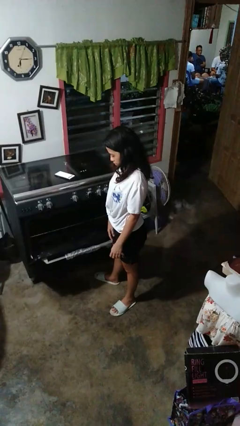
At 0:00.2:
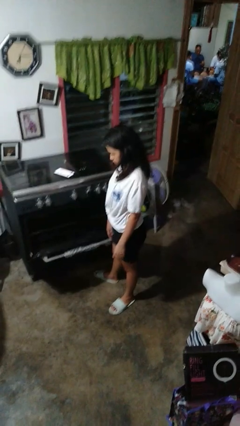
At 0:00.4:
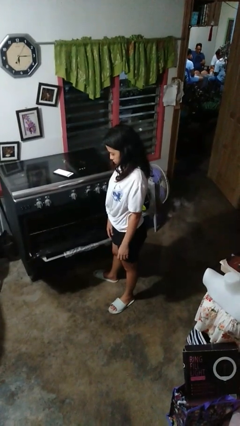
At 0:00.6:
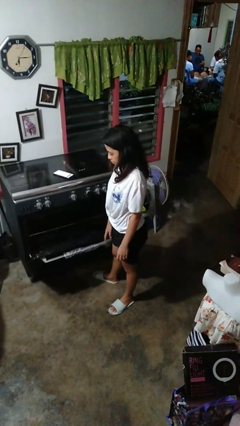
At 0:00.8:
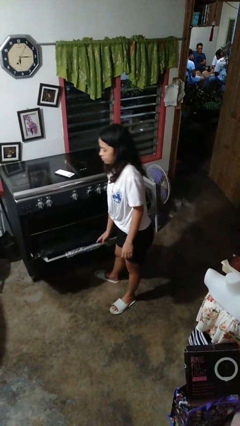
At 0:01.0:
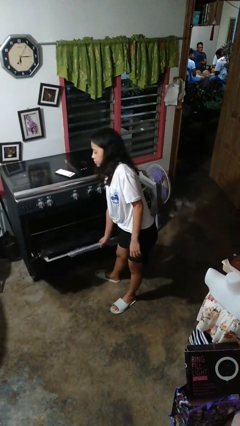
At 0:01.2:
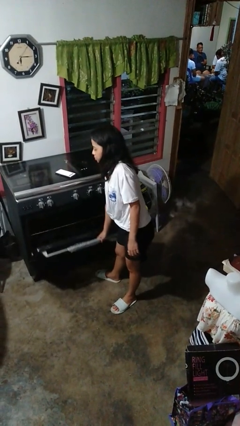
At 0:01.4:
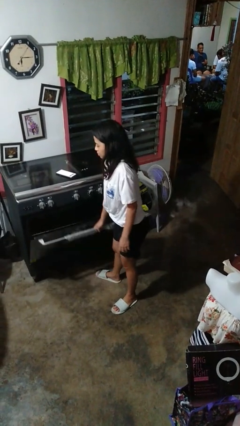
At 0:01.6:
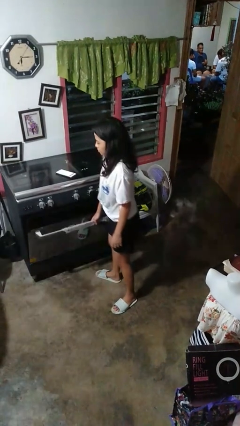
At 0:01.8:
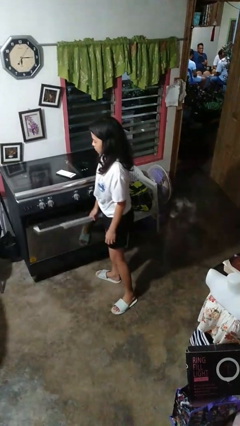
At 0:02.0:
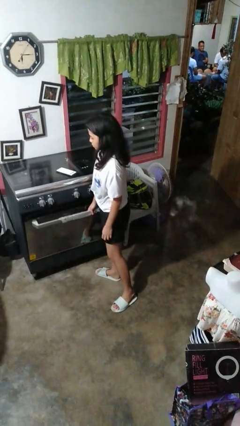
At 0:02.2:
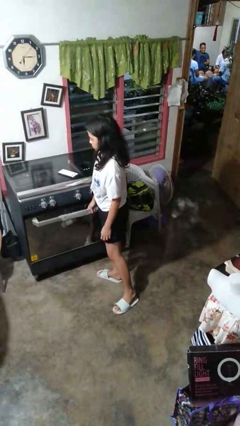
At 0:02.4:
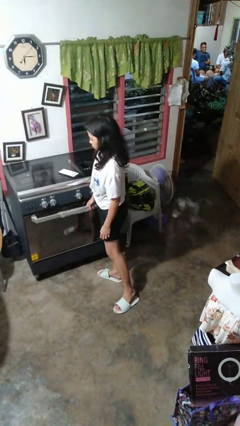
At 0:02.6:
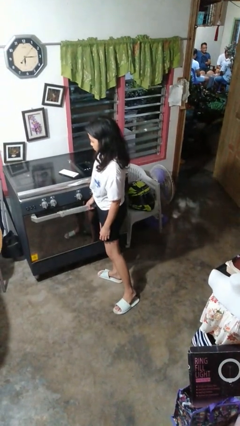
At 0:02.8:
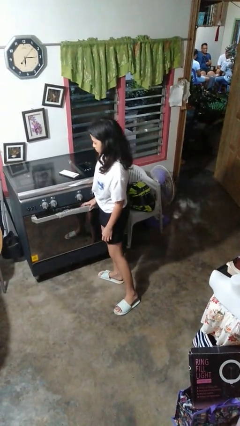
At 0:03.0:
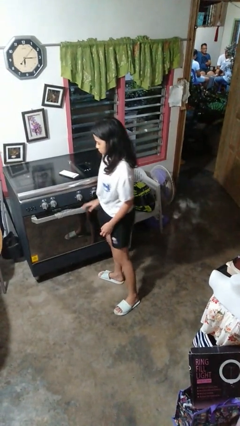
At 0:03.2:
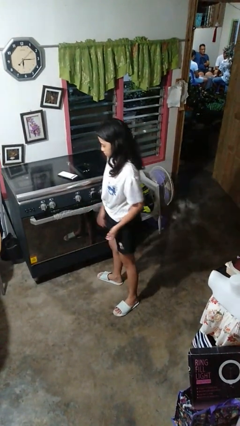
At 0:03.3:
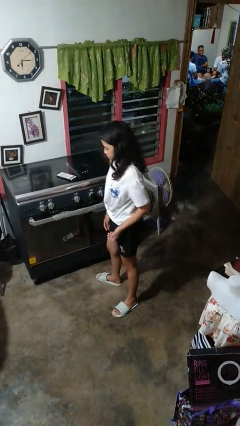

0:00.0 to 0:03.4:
person closes oven door

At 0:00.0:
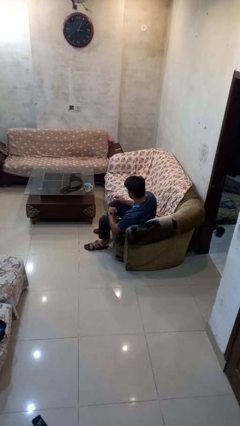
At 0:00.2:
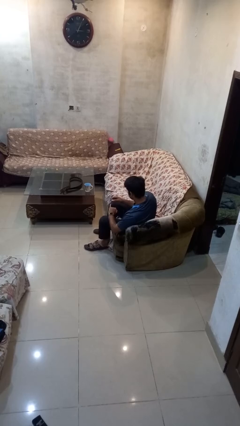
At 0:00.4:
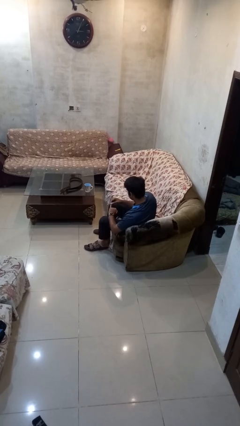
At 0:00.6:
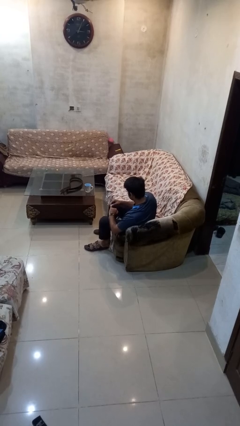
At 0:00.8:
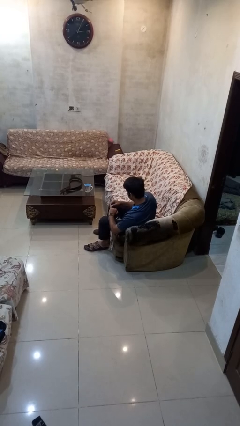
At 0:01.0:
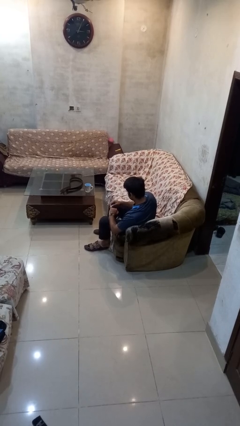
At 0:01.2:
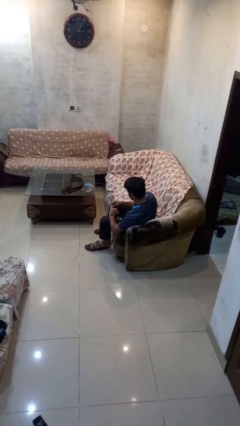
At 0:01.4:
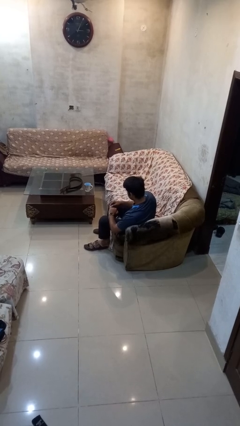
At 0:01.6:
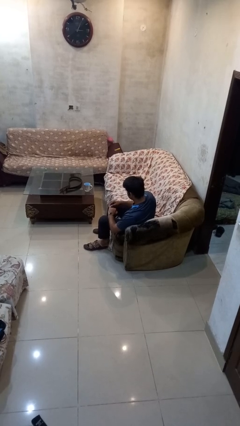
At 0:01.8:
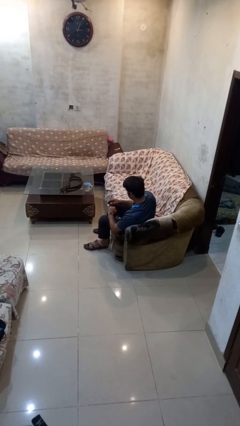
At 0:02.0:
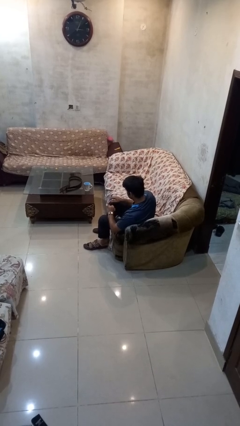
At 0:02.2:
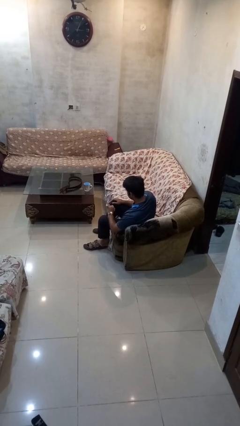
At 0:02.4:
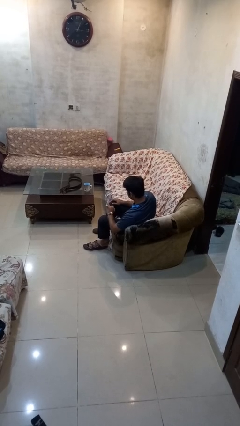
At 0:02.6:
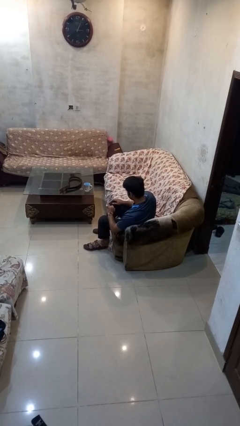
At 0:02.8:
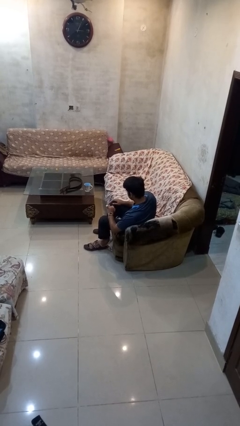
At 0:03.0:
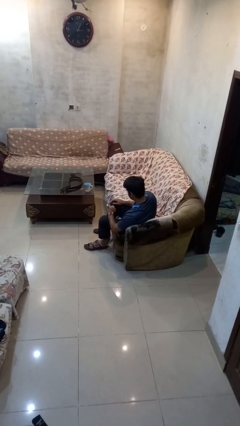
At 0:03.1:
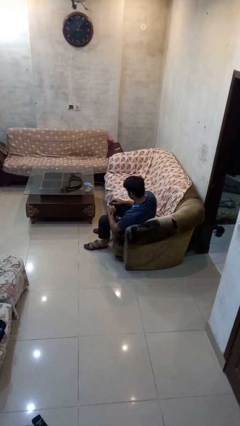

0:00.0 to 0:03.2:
person puts on ring

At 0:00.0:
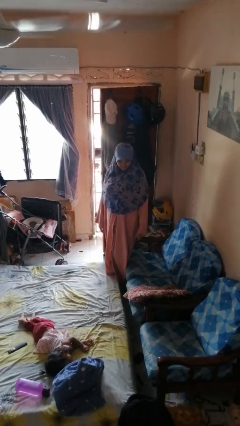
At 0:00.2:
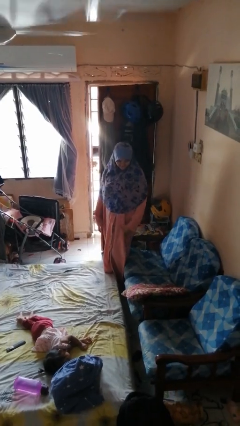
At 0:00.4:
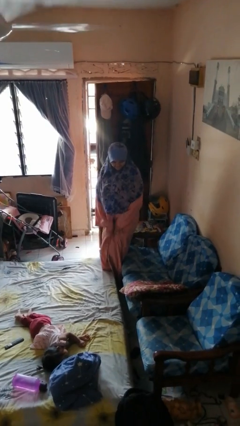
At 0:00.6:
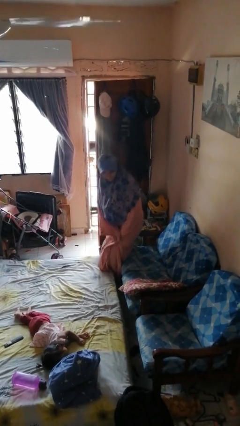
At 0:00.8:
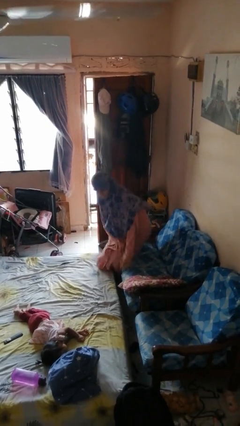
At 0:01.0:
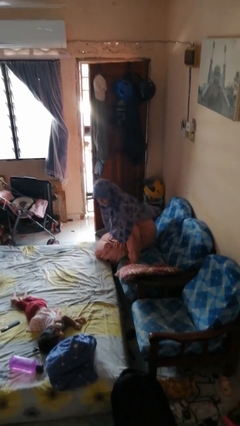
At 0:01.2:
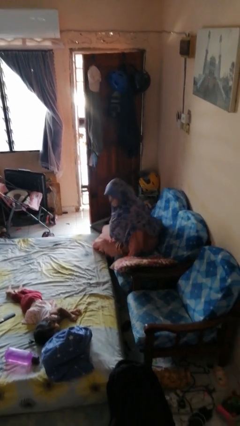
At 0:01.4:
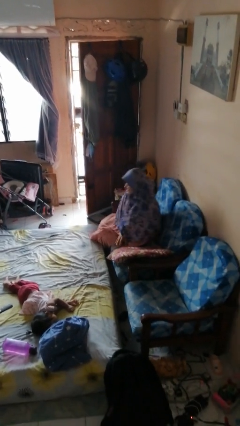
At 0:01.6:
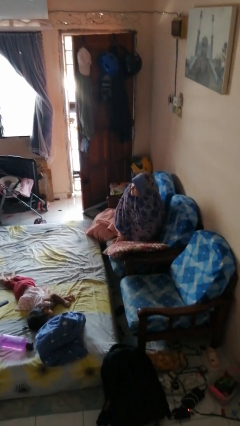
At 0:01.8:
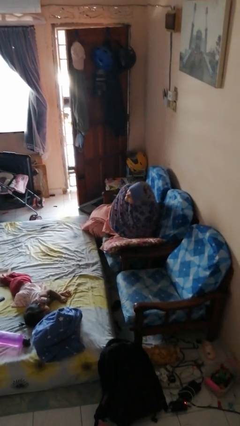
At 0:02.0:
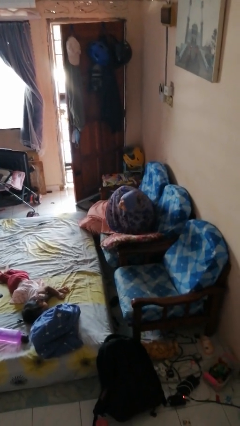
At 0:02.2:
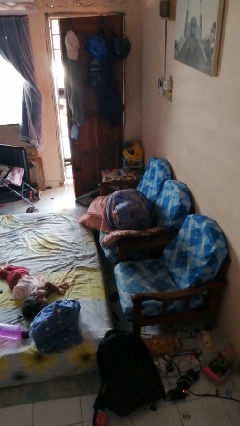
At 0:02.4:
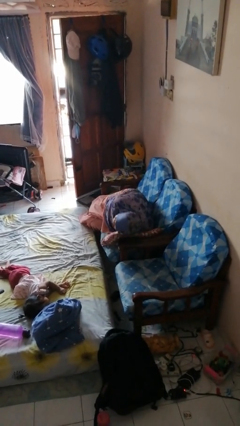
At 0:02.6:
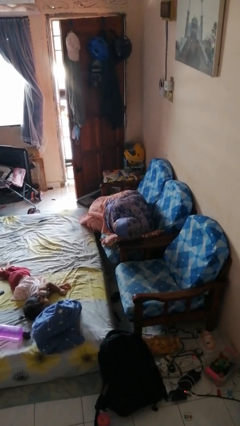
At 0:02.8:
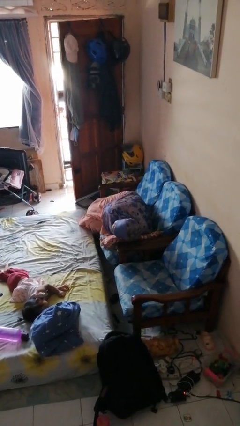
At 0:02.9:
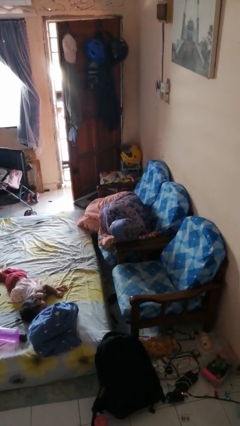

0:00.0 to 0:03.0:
person lies down on couch

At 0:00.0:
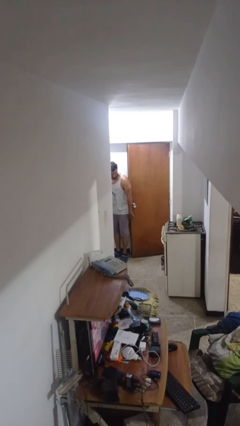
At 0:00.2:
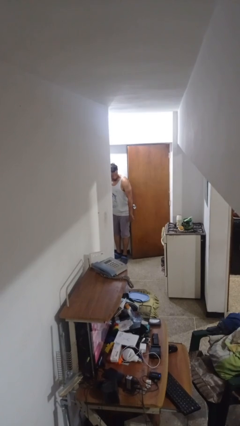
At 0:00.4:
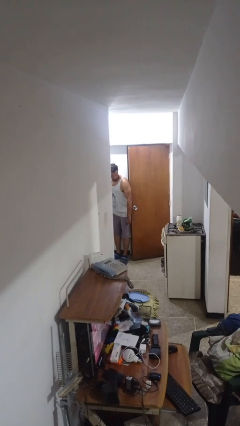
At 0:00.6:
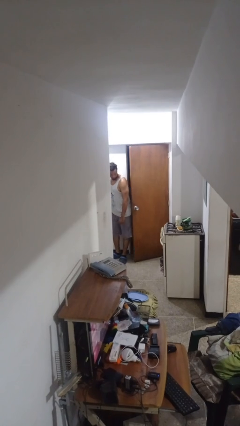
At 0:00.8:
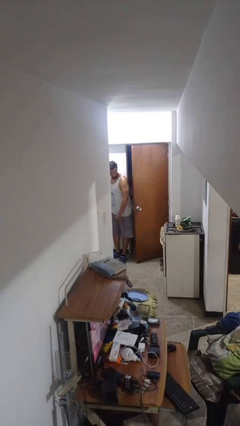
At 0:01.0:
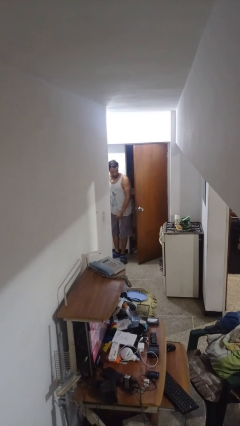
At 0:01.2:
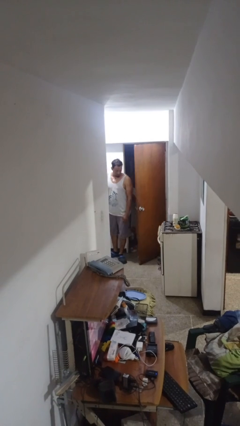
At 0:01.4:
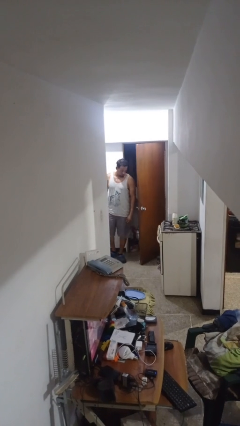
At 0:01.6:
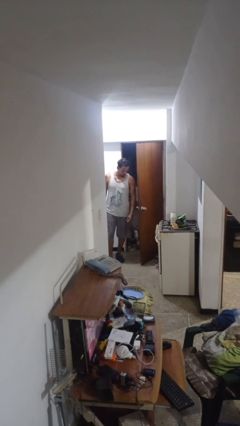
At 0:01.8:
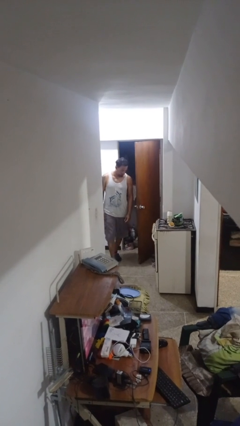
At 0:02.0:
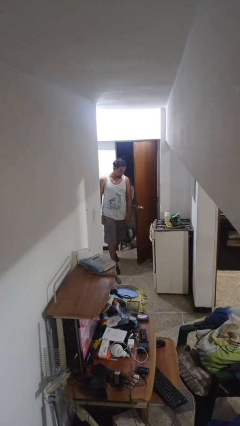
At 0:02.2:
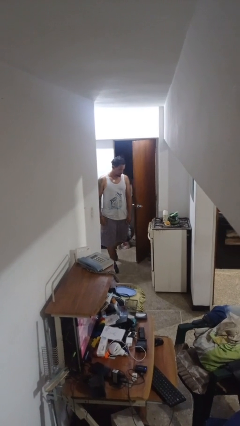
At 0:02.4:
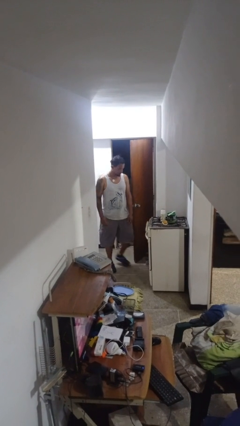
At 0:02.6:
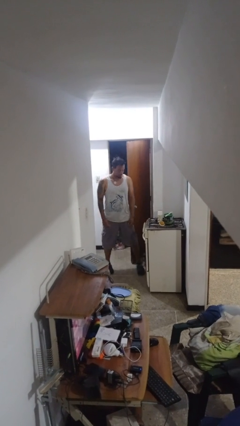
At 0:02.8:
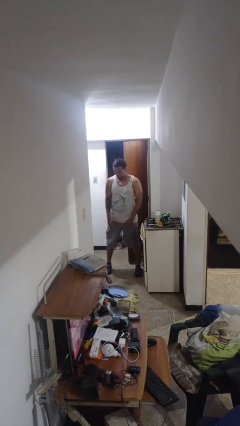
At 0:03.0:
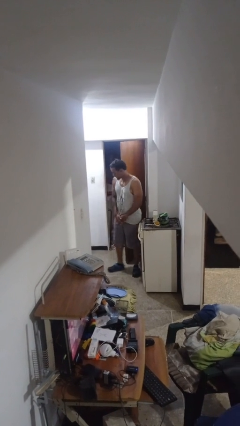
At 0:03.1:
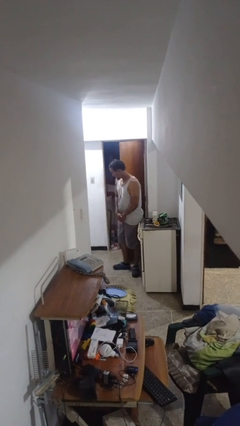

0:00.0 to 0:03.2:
person opens facility door

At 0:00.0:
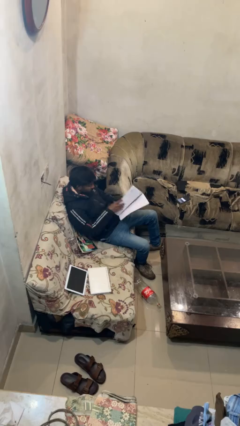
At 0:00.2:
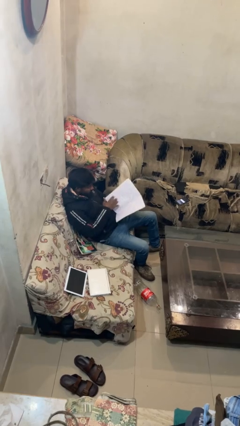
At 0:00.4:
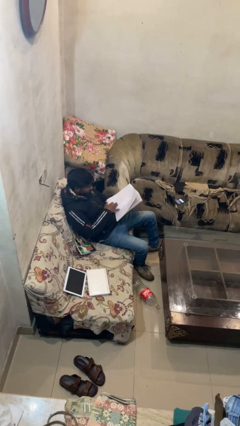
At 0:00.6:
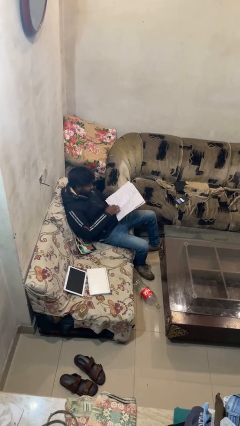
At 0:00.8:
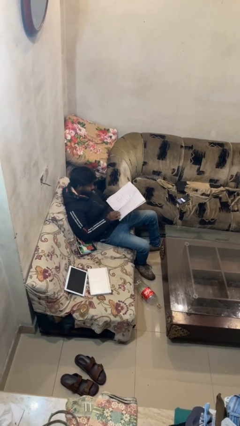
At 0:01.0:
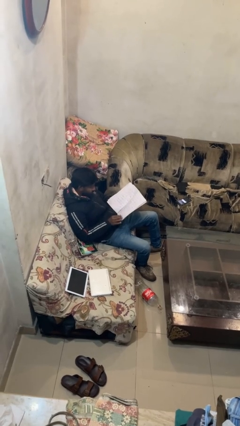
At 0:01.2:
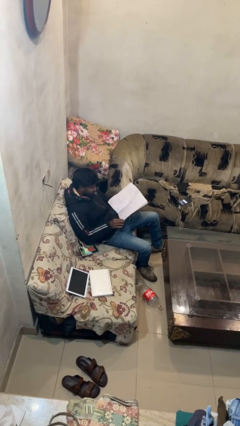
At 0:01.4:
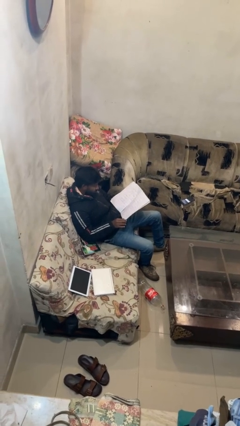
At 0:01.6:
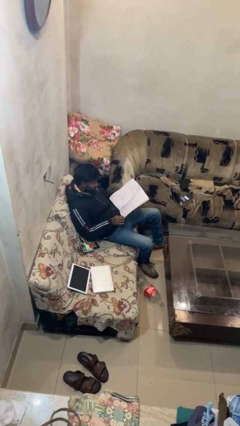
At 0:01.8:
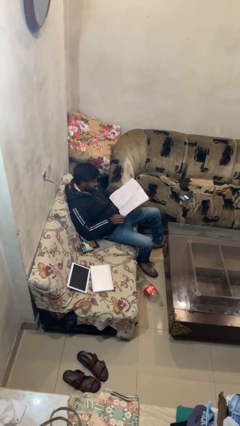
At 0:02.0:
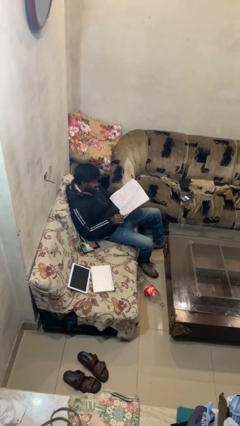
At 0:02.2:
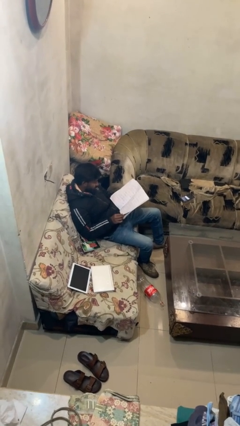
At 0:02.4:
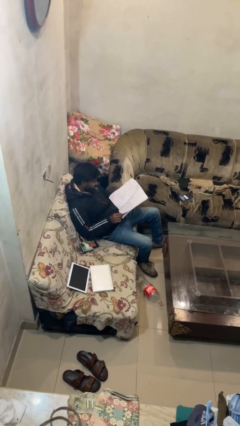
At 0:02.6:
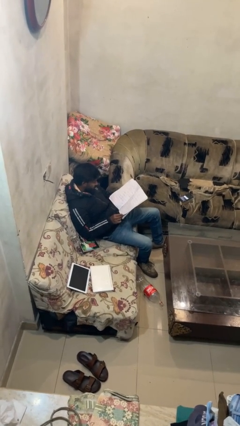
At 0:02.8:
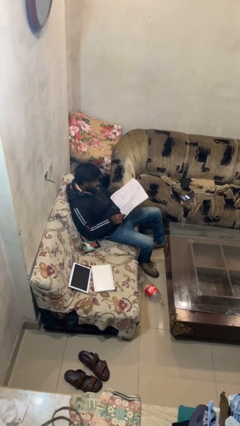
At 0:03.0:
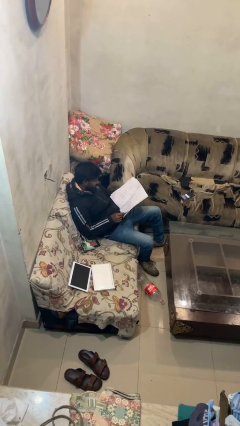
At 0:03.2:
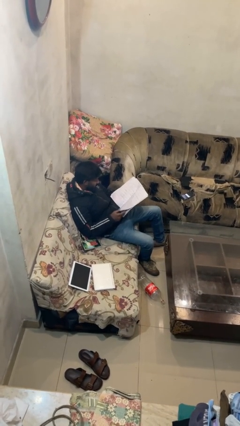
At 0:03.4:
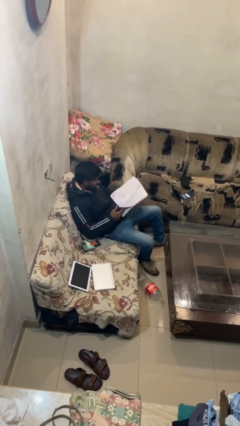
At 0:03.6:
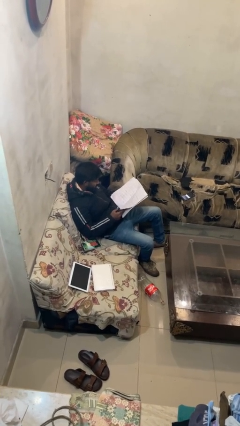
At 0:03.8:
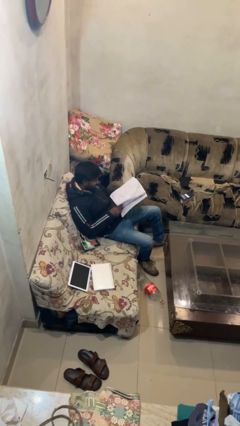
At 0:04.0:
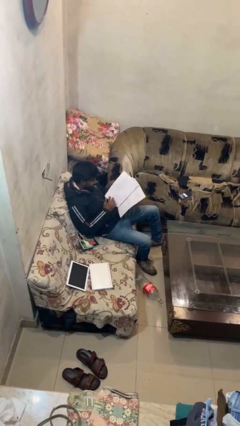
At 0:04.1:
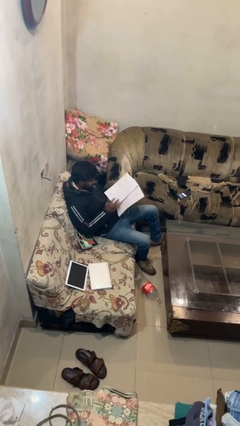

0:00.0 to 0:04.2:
person reads document

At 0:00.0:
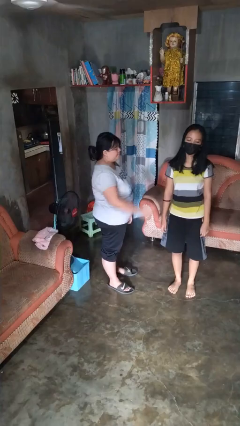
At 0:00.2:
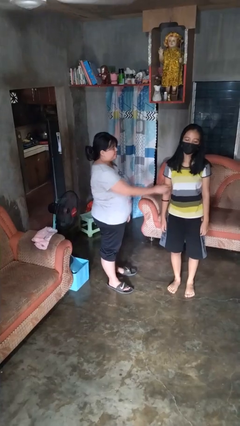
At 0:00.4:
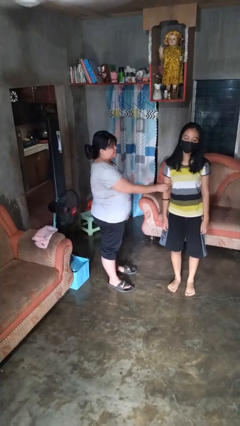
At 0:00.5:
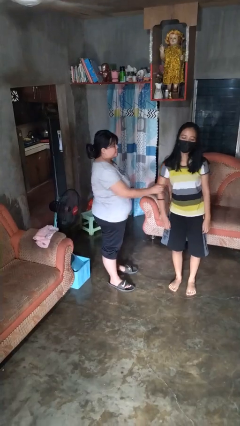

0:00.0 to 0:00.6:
person grabs person by bicep
